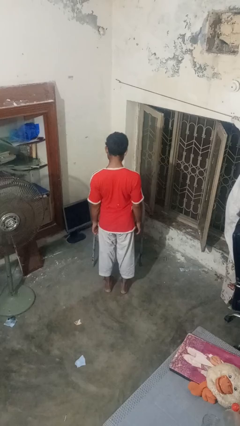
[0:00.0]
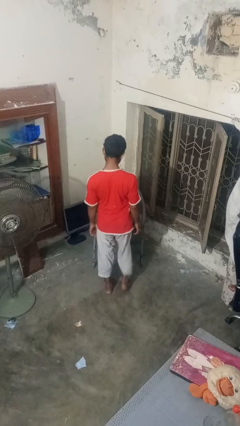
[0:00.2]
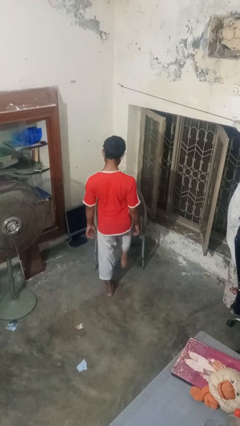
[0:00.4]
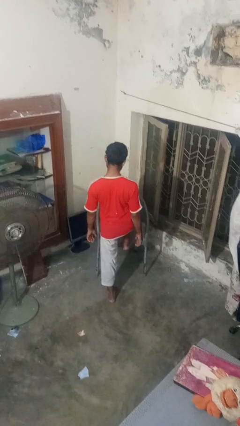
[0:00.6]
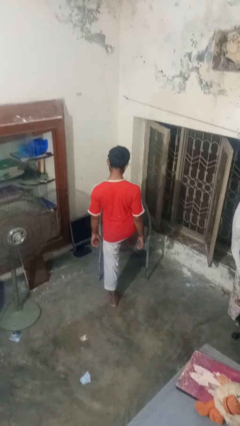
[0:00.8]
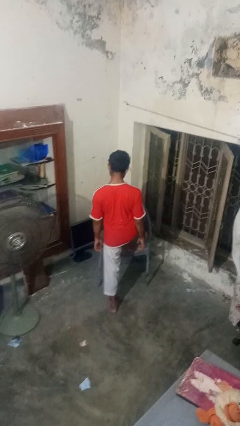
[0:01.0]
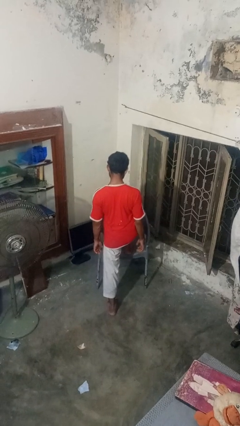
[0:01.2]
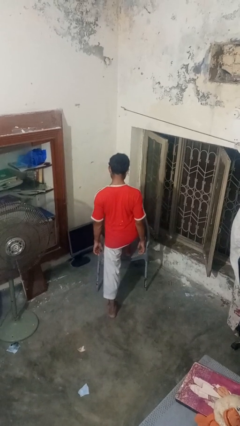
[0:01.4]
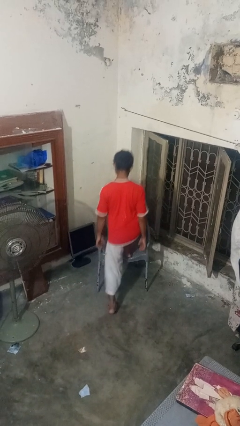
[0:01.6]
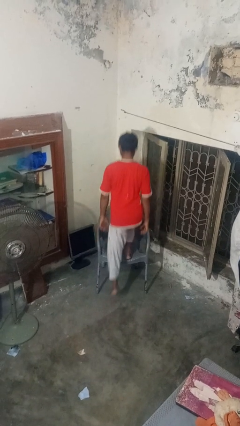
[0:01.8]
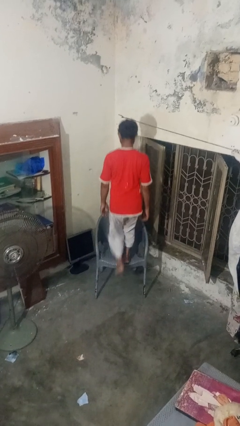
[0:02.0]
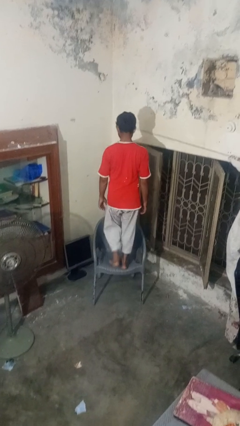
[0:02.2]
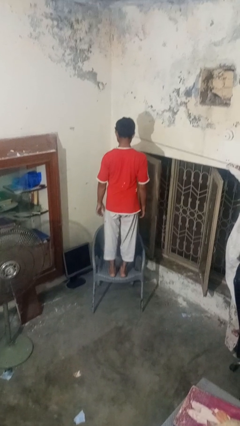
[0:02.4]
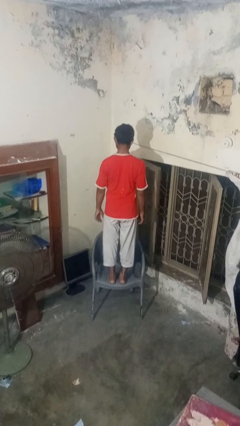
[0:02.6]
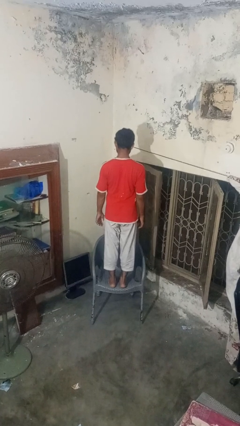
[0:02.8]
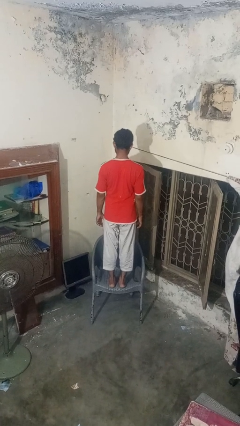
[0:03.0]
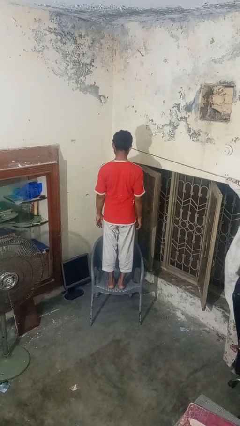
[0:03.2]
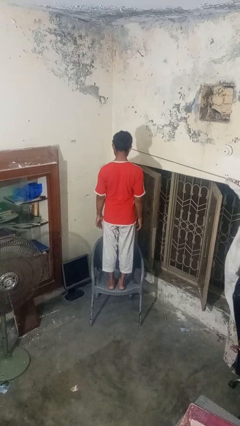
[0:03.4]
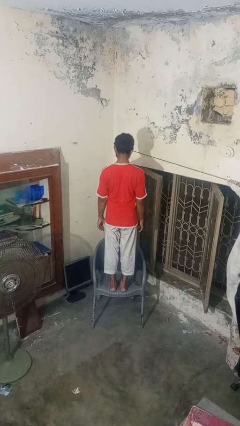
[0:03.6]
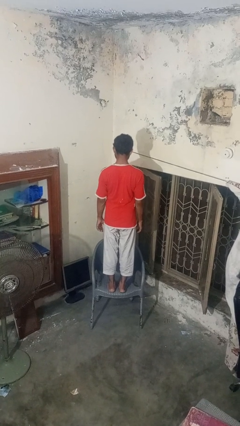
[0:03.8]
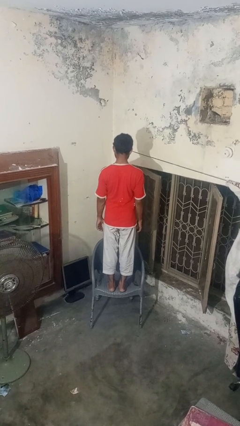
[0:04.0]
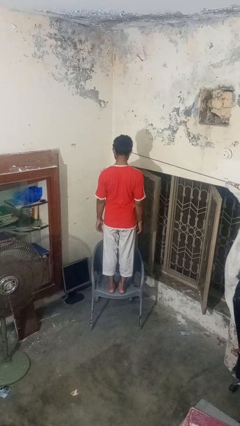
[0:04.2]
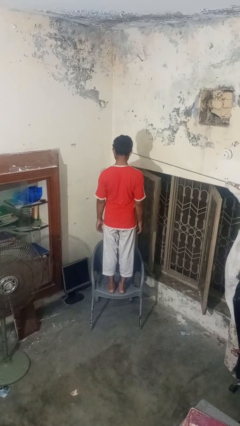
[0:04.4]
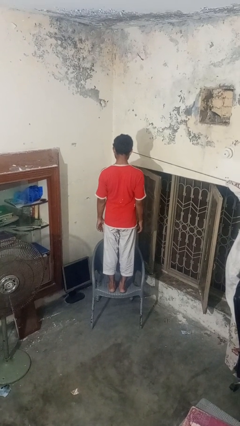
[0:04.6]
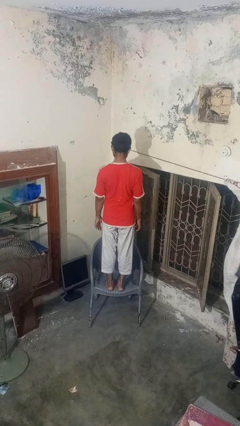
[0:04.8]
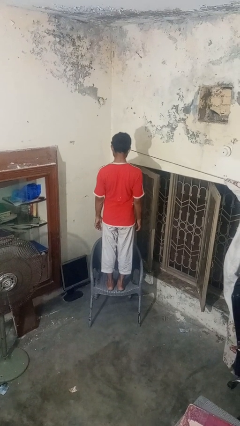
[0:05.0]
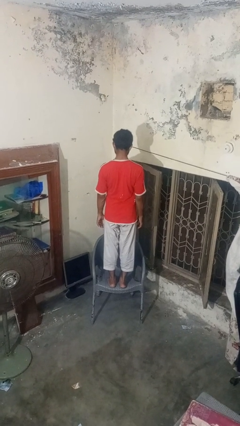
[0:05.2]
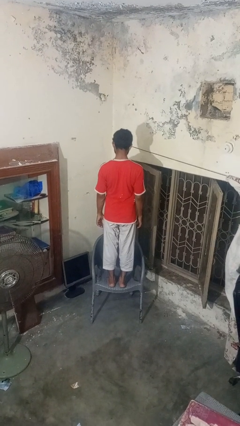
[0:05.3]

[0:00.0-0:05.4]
person climbs on chair

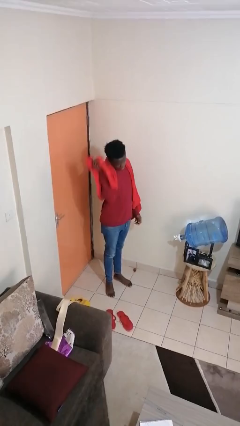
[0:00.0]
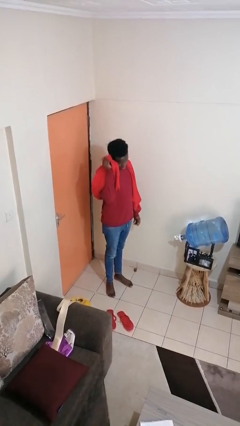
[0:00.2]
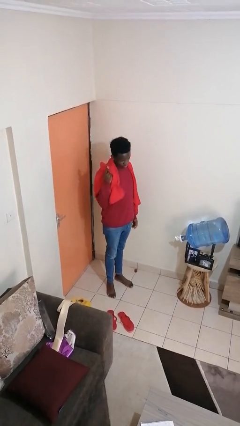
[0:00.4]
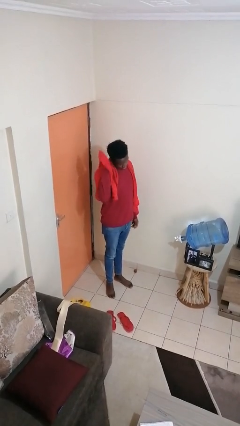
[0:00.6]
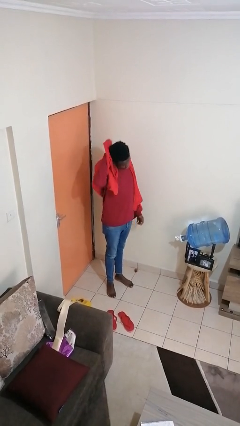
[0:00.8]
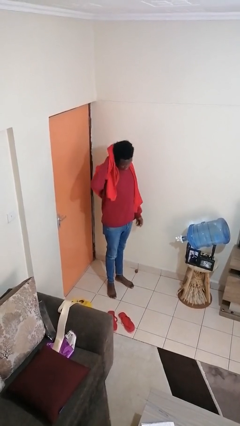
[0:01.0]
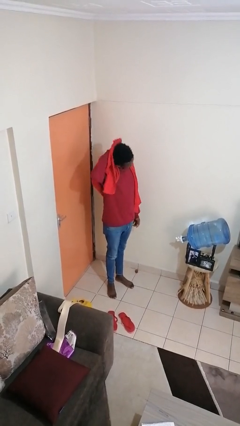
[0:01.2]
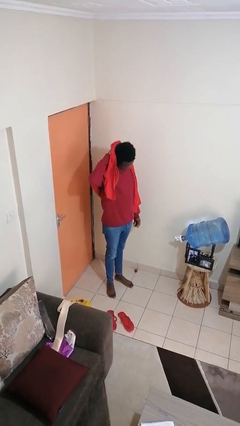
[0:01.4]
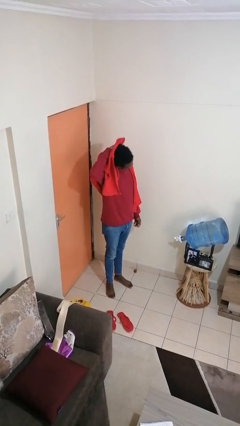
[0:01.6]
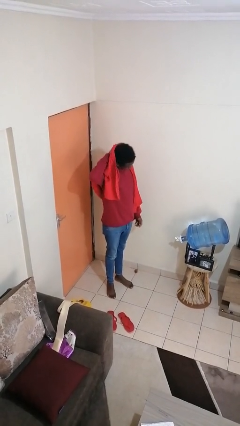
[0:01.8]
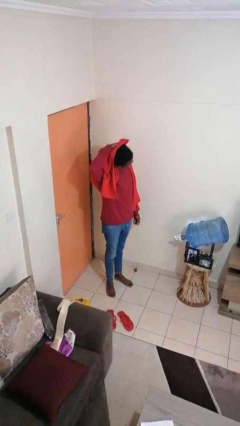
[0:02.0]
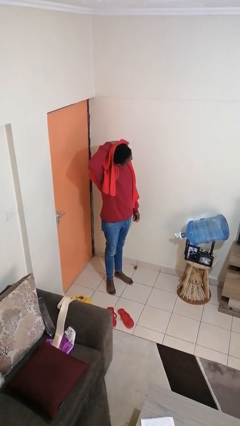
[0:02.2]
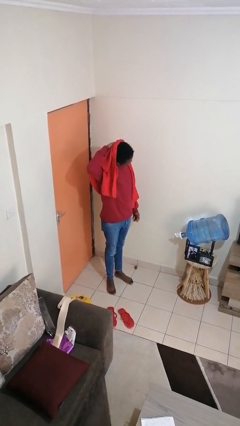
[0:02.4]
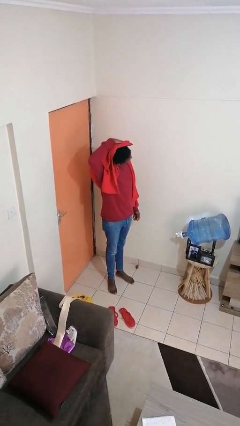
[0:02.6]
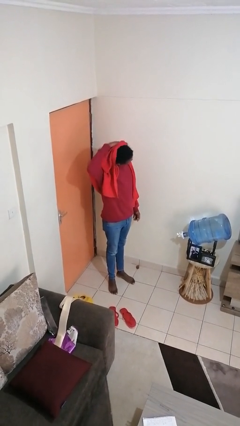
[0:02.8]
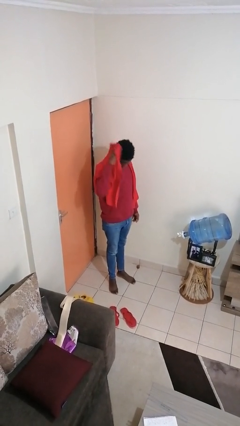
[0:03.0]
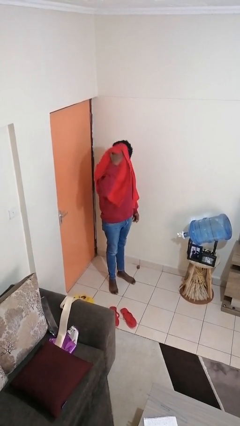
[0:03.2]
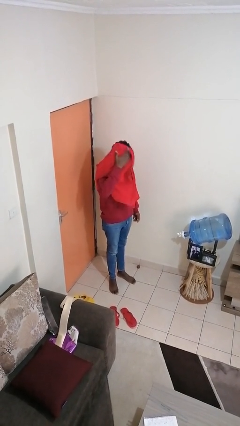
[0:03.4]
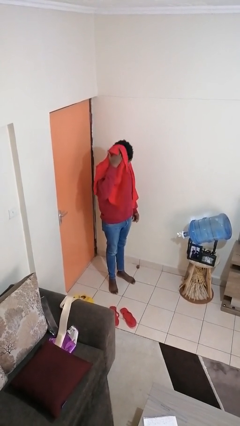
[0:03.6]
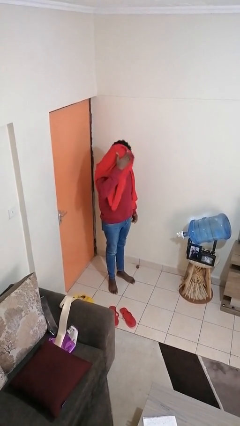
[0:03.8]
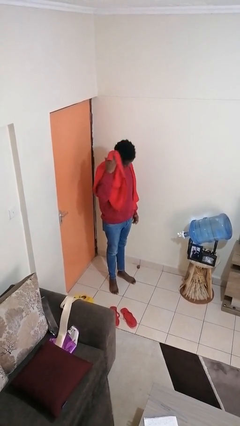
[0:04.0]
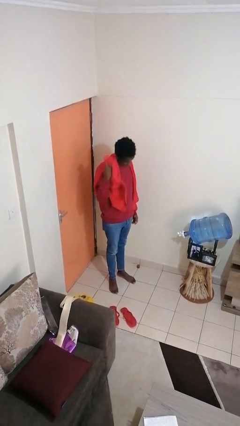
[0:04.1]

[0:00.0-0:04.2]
person dries hair with towel

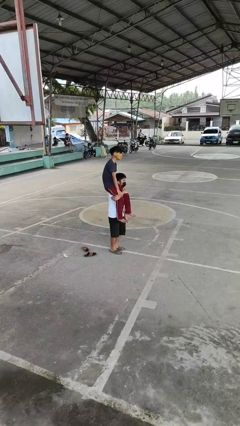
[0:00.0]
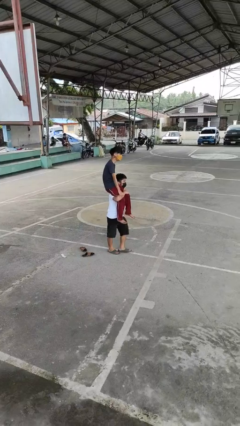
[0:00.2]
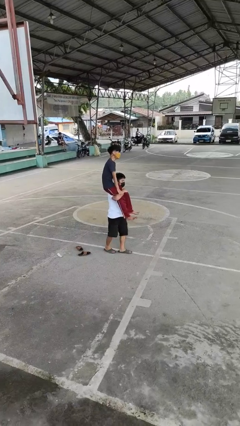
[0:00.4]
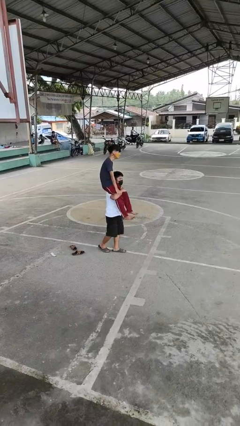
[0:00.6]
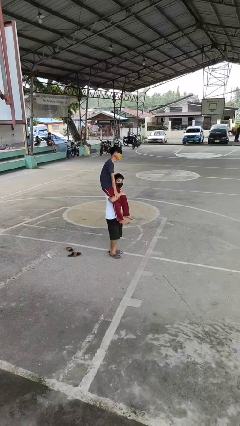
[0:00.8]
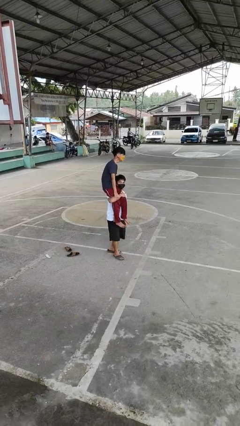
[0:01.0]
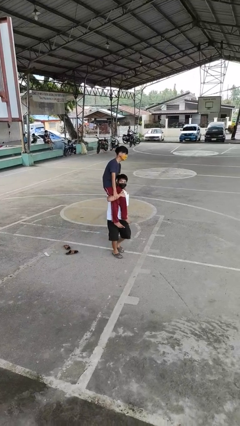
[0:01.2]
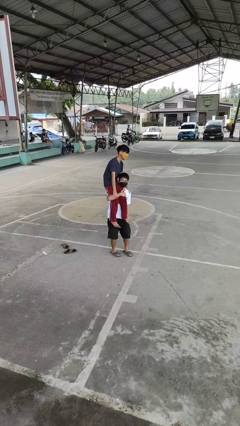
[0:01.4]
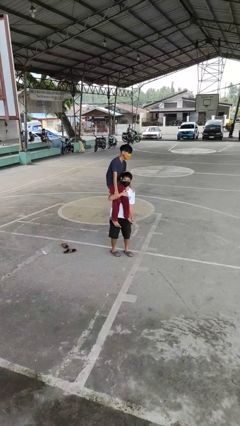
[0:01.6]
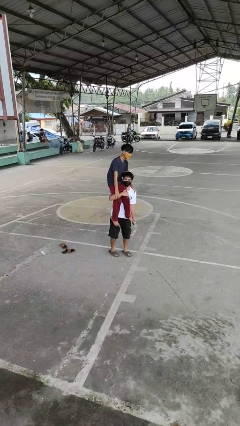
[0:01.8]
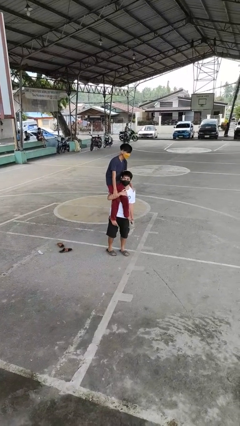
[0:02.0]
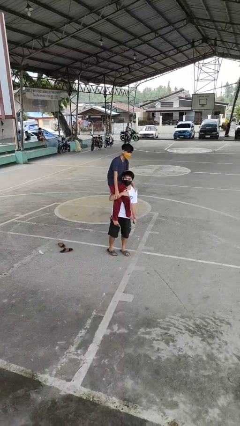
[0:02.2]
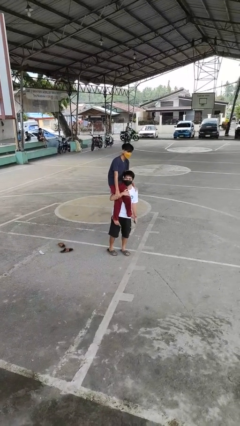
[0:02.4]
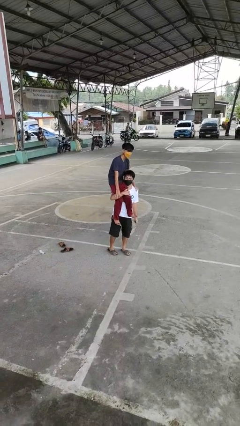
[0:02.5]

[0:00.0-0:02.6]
person carries person on shoulders

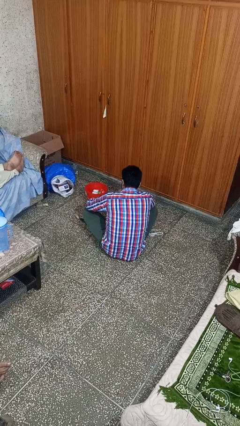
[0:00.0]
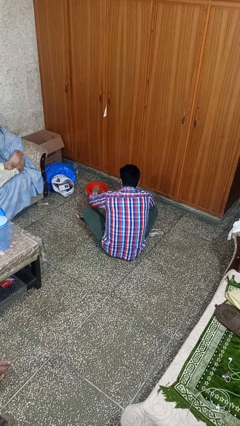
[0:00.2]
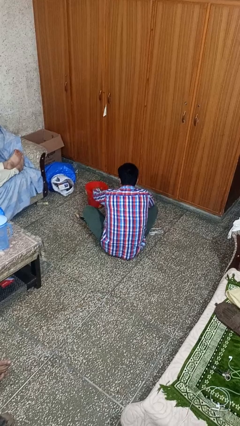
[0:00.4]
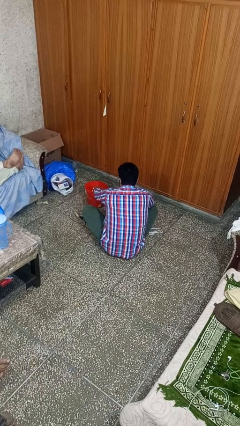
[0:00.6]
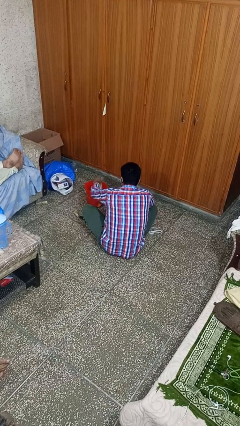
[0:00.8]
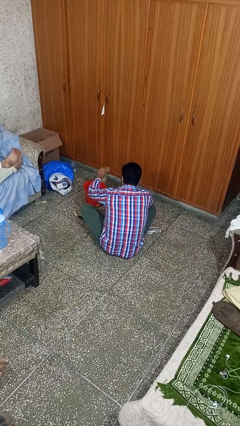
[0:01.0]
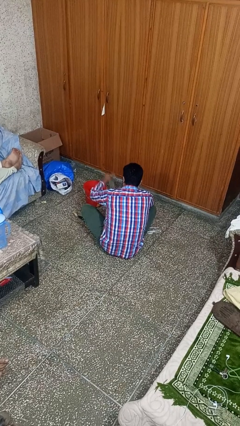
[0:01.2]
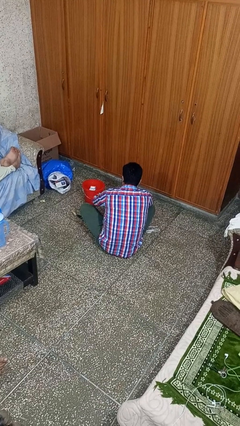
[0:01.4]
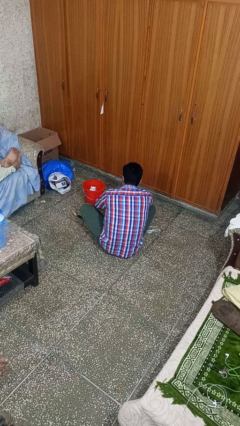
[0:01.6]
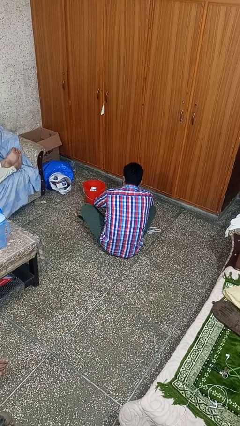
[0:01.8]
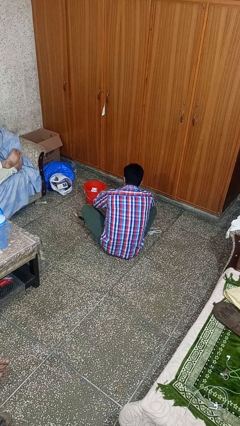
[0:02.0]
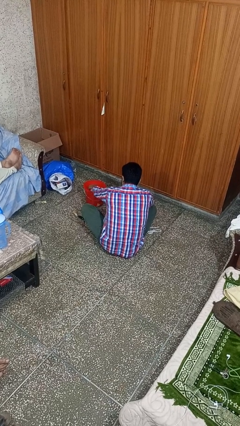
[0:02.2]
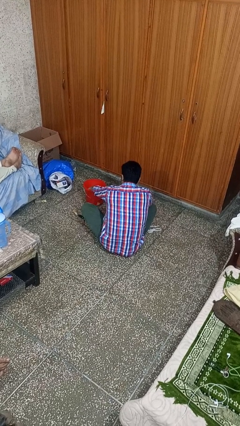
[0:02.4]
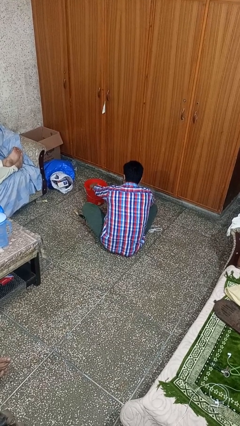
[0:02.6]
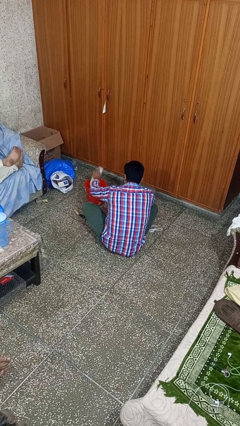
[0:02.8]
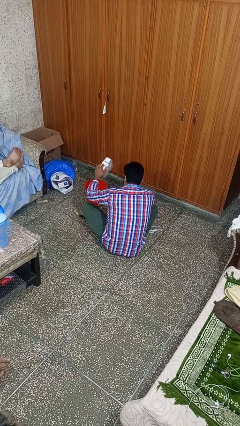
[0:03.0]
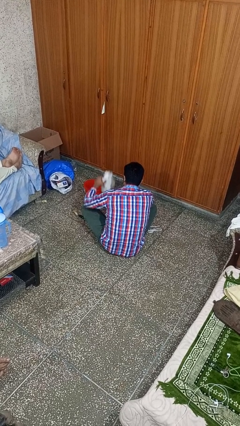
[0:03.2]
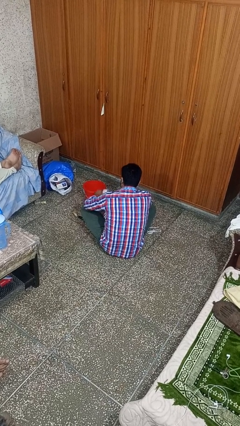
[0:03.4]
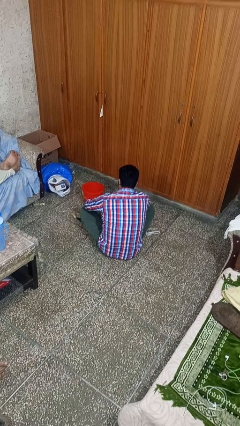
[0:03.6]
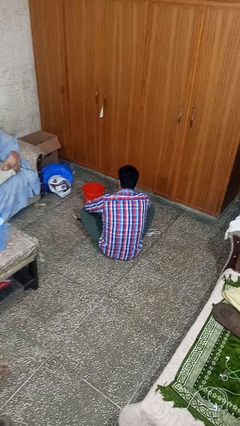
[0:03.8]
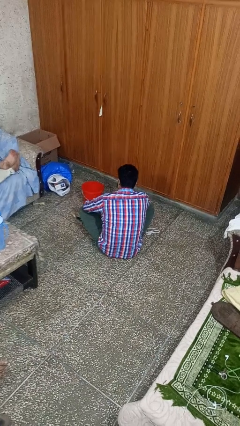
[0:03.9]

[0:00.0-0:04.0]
person takes object from basket

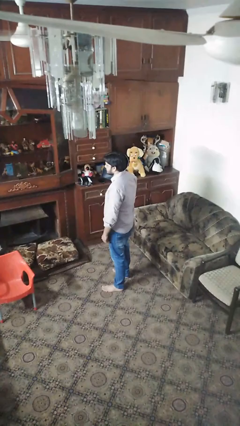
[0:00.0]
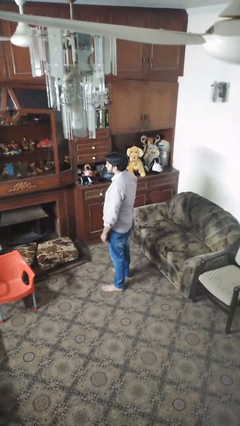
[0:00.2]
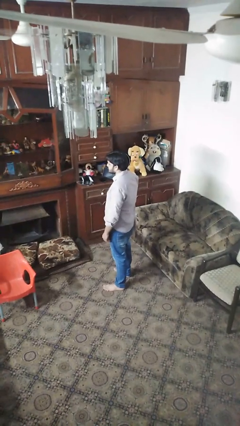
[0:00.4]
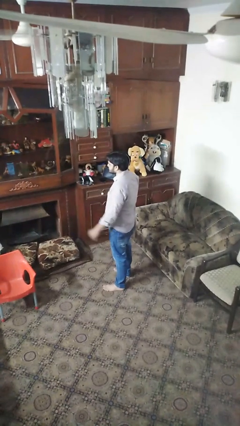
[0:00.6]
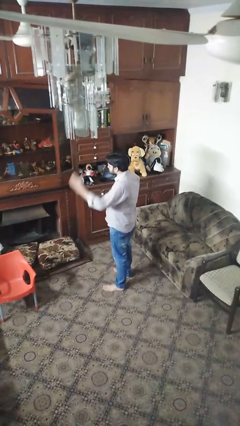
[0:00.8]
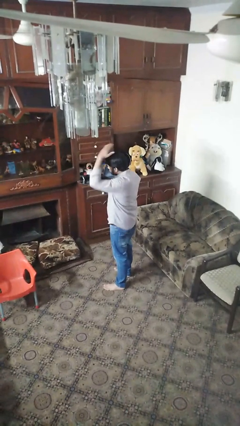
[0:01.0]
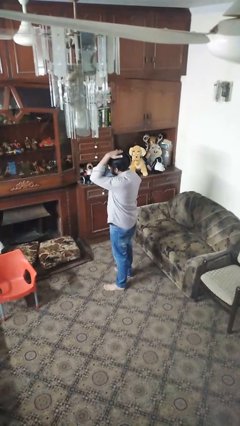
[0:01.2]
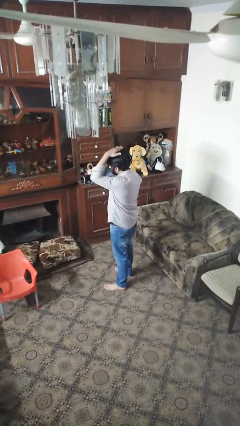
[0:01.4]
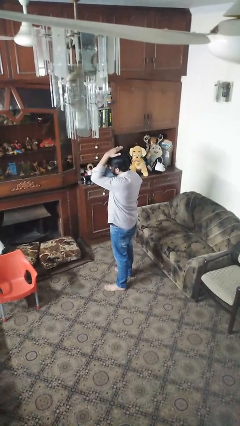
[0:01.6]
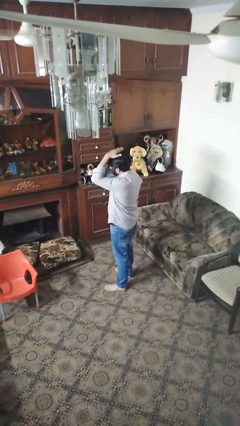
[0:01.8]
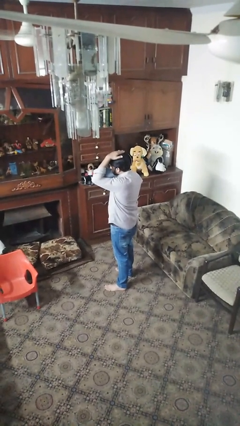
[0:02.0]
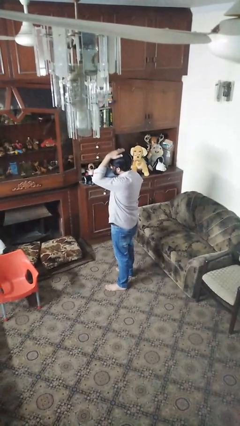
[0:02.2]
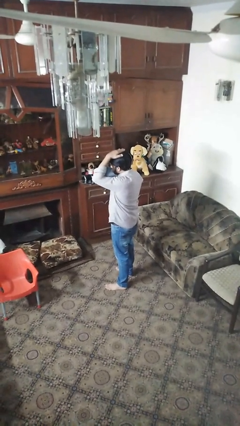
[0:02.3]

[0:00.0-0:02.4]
person pats head
